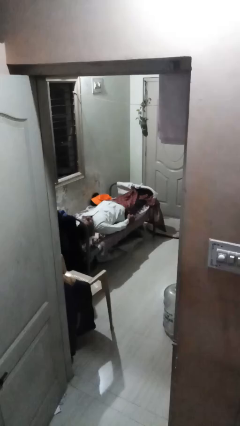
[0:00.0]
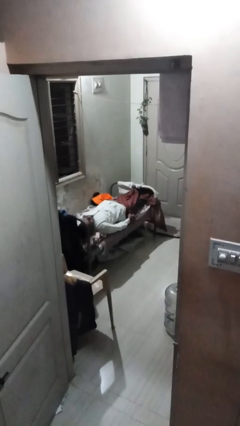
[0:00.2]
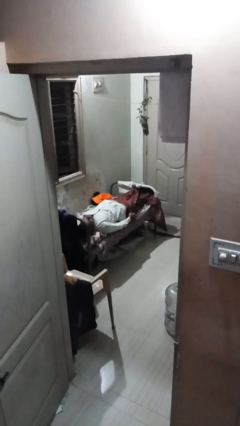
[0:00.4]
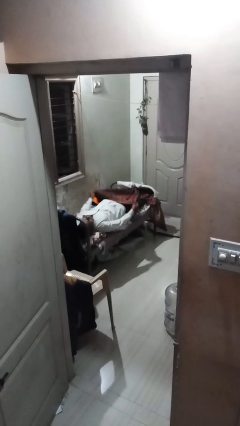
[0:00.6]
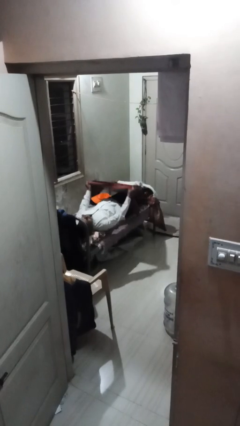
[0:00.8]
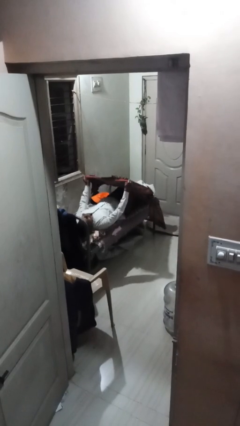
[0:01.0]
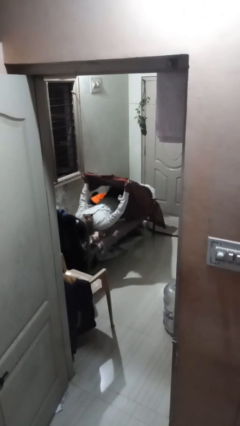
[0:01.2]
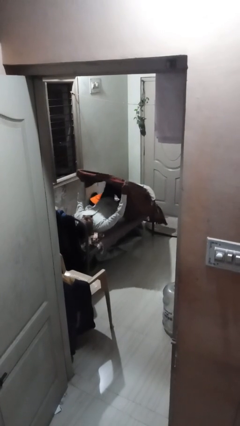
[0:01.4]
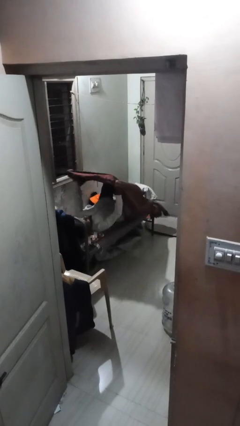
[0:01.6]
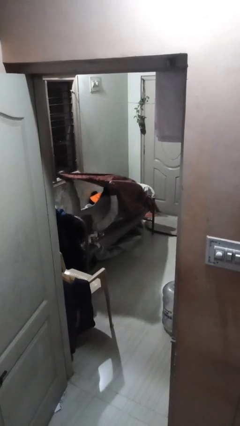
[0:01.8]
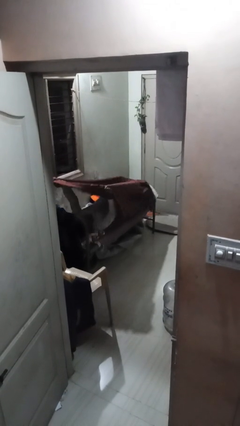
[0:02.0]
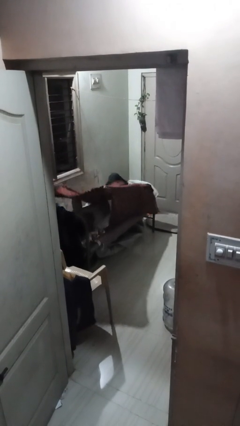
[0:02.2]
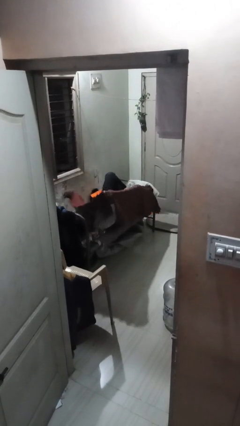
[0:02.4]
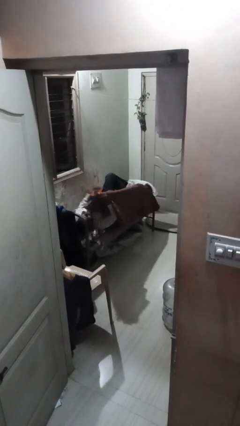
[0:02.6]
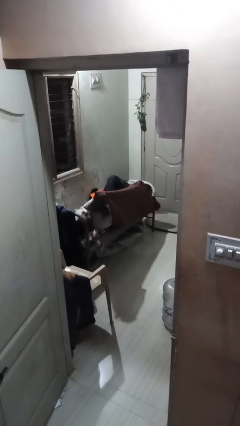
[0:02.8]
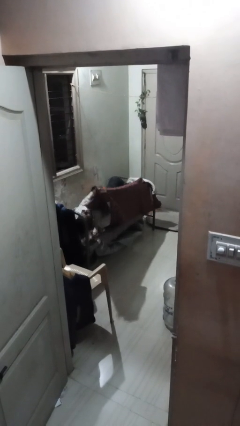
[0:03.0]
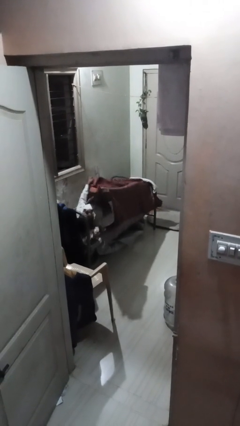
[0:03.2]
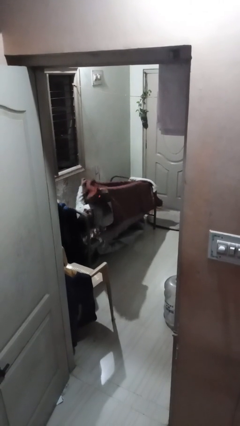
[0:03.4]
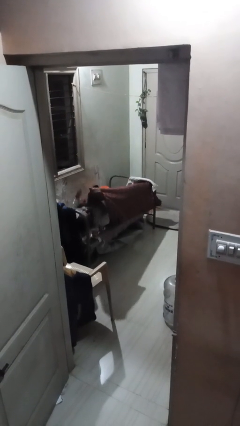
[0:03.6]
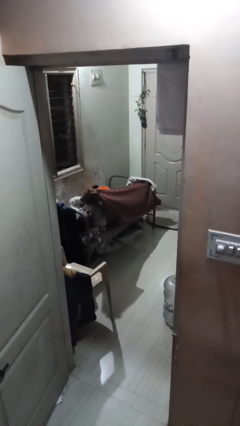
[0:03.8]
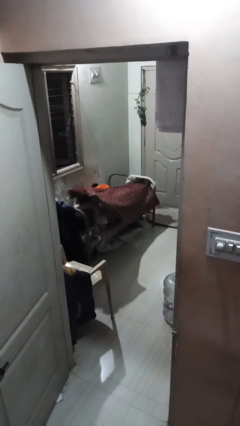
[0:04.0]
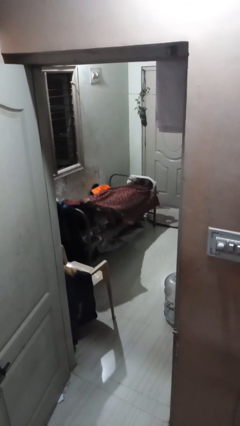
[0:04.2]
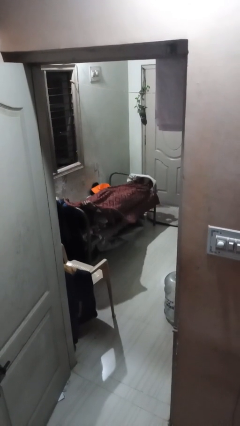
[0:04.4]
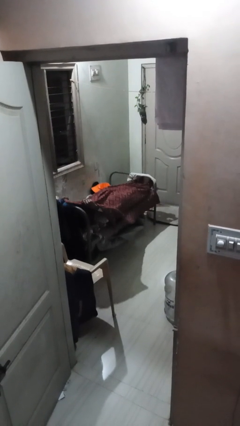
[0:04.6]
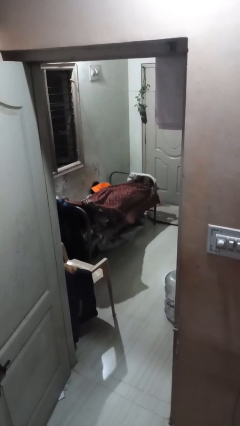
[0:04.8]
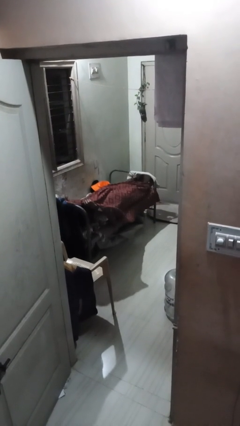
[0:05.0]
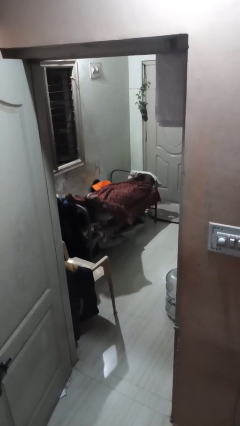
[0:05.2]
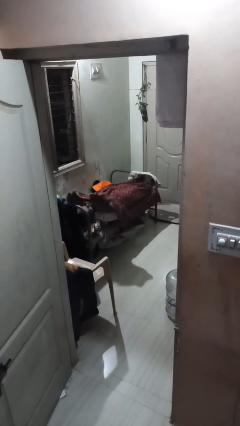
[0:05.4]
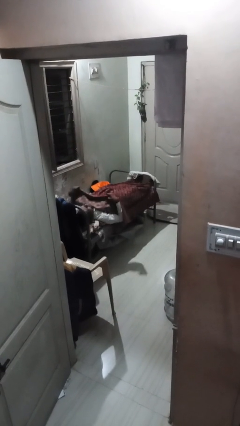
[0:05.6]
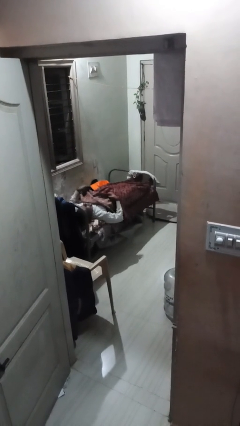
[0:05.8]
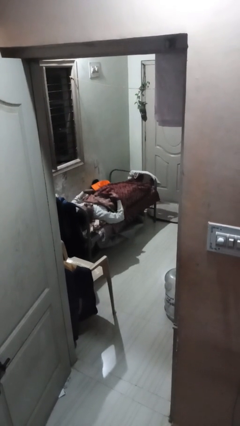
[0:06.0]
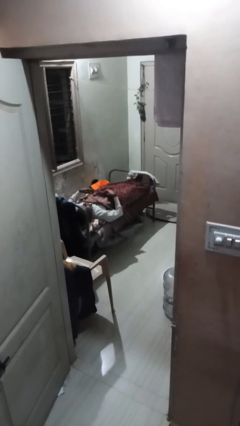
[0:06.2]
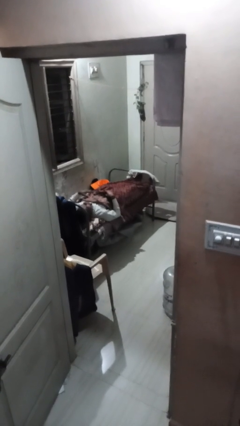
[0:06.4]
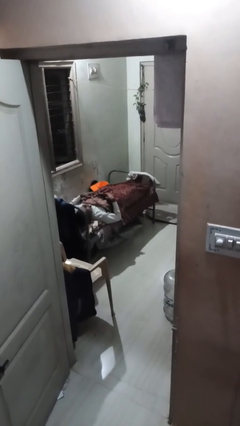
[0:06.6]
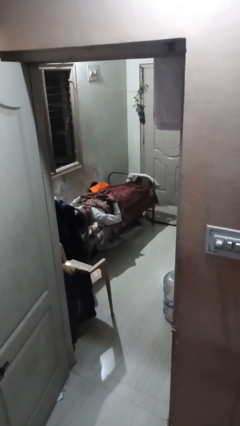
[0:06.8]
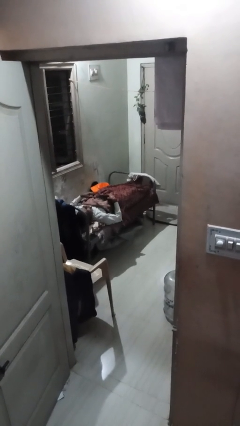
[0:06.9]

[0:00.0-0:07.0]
person covers with bedsheets

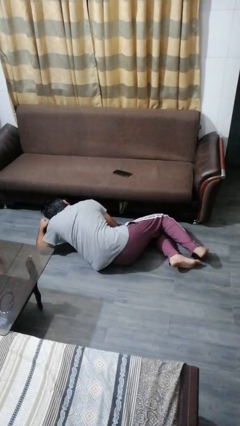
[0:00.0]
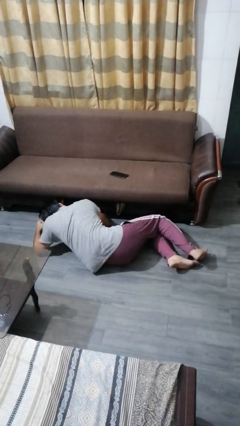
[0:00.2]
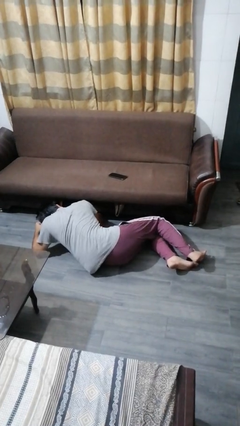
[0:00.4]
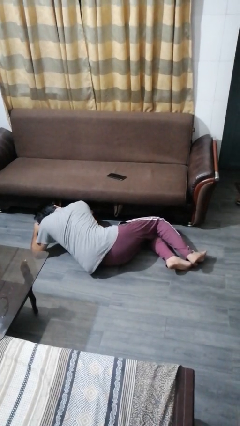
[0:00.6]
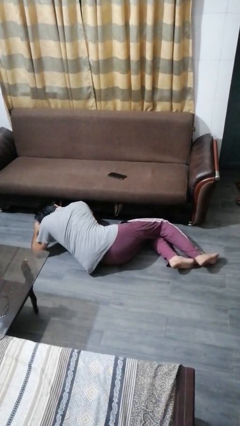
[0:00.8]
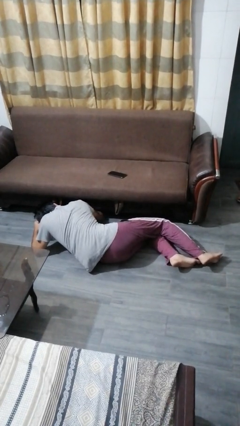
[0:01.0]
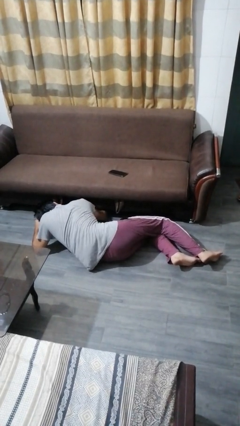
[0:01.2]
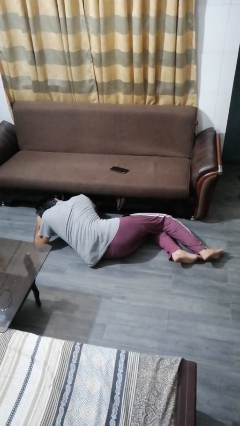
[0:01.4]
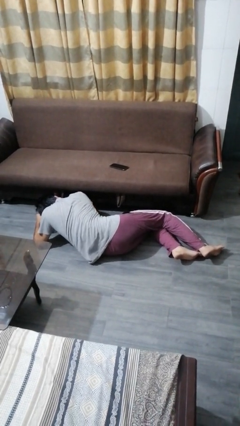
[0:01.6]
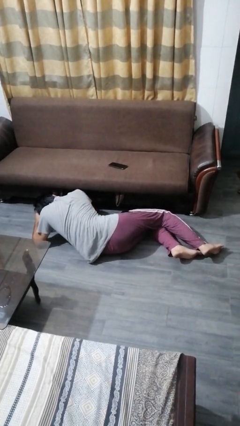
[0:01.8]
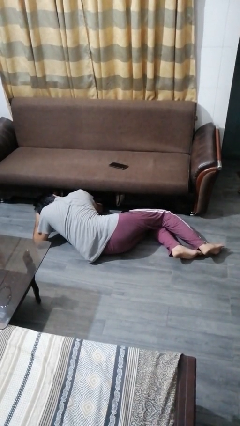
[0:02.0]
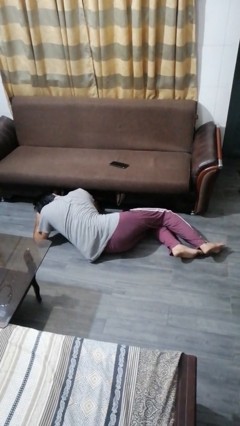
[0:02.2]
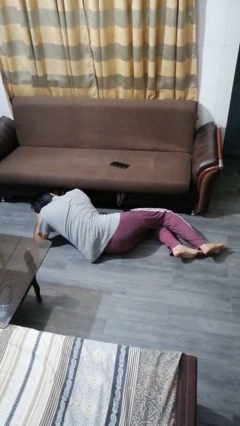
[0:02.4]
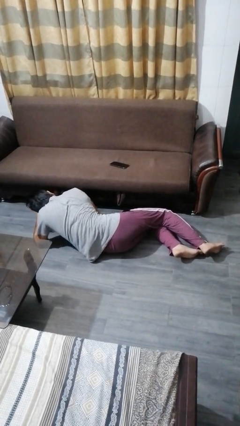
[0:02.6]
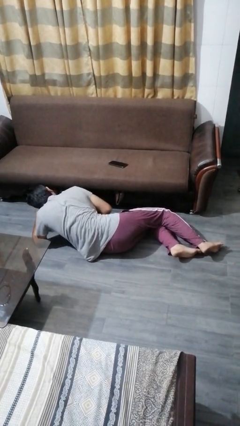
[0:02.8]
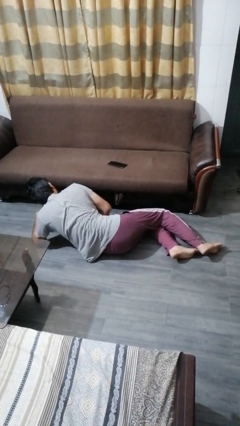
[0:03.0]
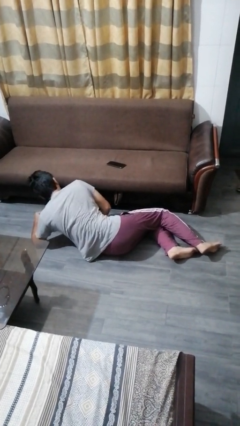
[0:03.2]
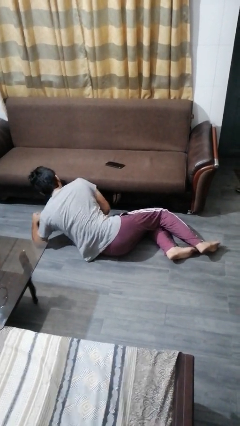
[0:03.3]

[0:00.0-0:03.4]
person searches under couch

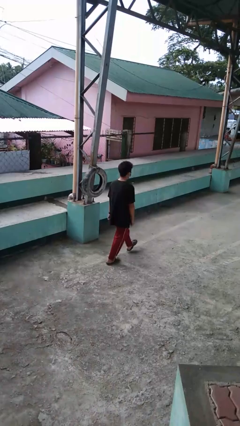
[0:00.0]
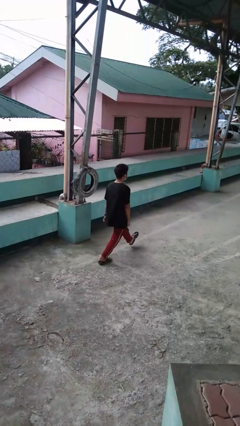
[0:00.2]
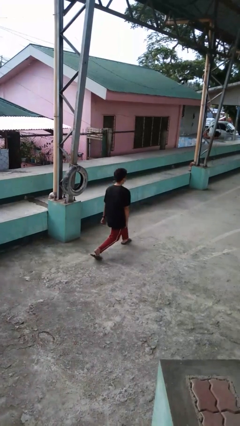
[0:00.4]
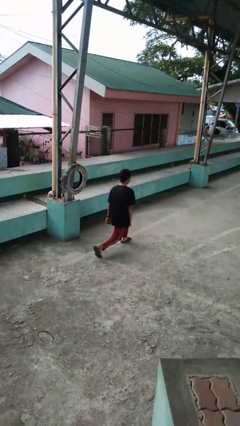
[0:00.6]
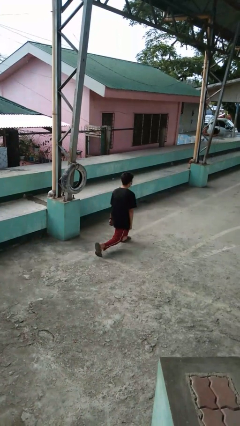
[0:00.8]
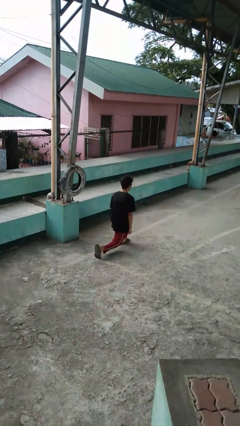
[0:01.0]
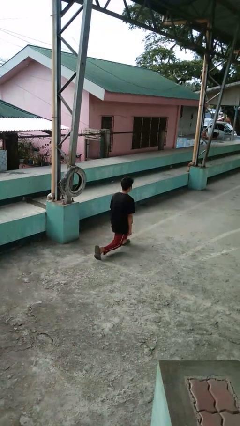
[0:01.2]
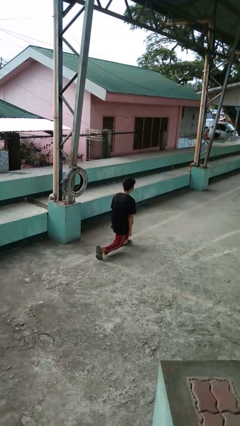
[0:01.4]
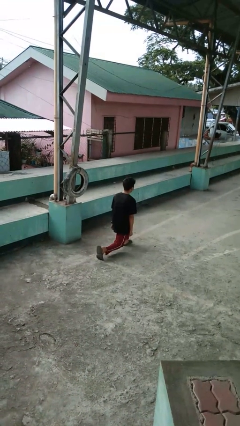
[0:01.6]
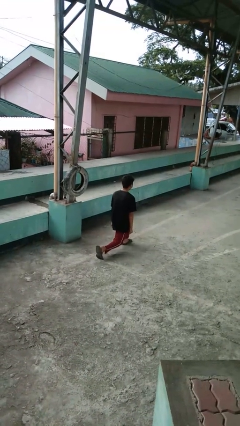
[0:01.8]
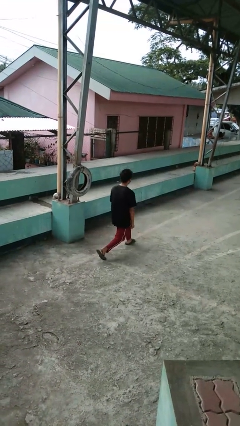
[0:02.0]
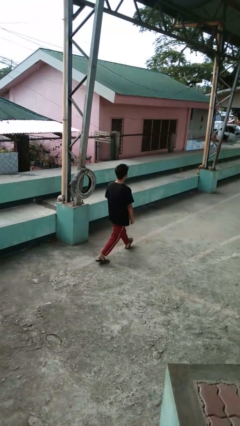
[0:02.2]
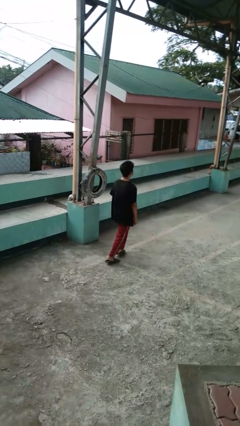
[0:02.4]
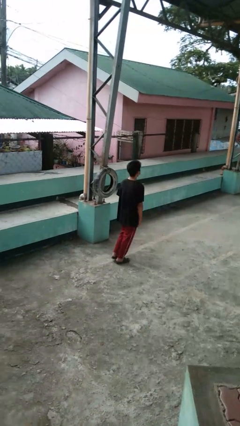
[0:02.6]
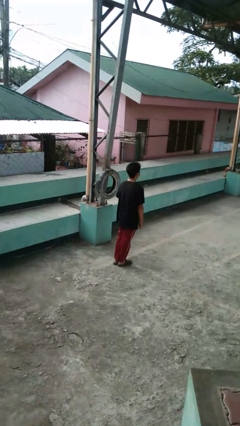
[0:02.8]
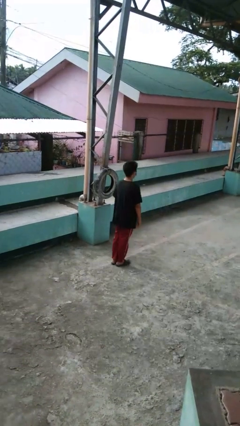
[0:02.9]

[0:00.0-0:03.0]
person exercises with lunges

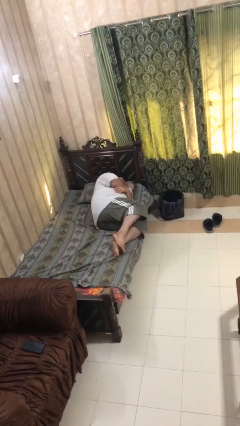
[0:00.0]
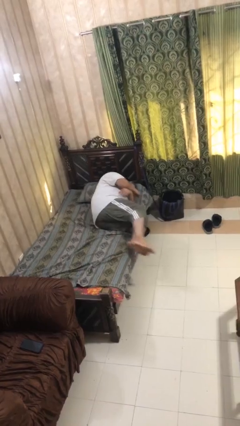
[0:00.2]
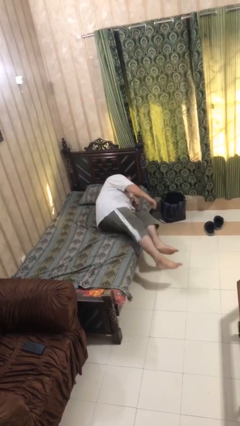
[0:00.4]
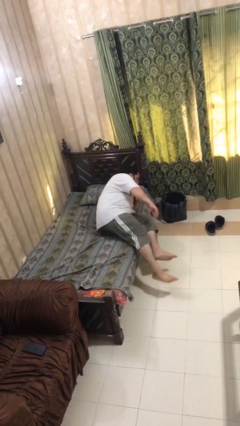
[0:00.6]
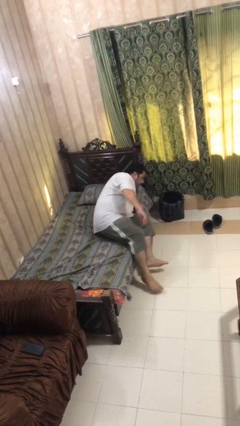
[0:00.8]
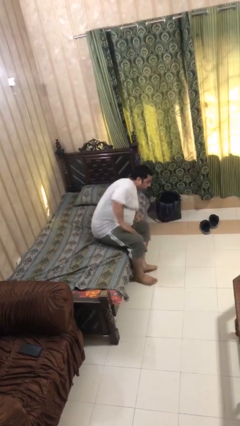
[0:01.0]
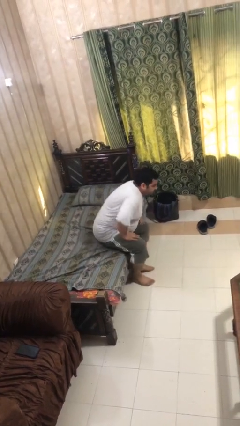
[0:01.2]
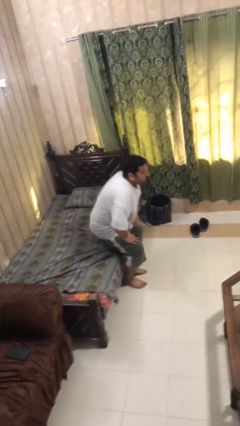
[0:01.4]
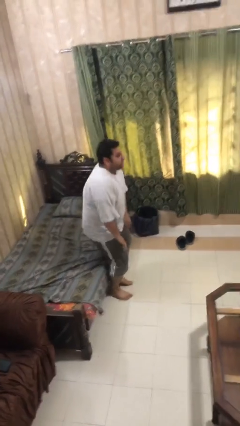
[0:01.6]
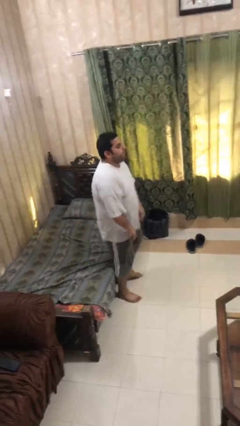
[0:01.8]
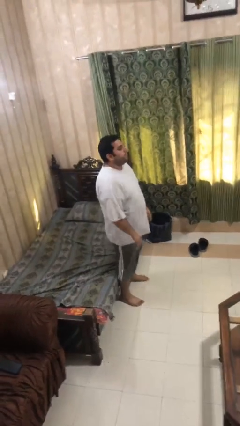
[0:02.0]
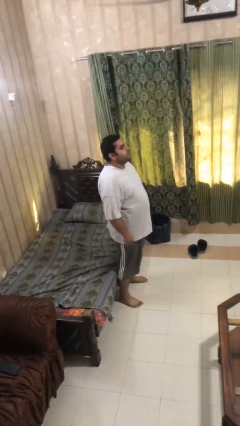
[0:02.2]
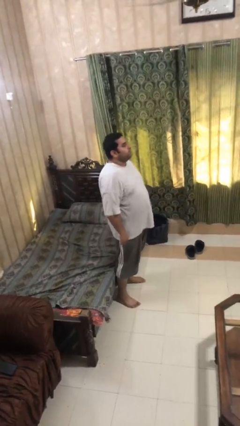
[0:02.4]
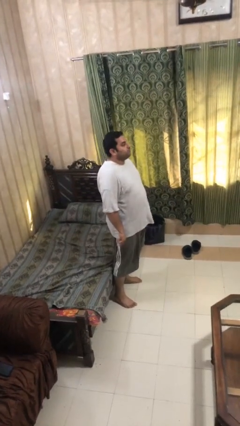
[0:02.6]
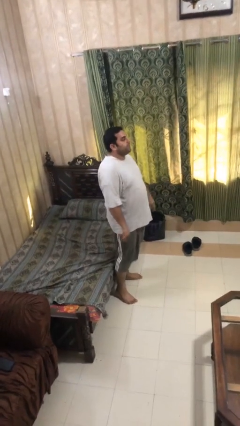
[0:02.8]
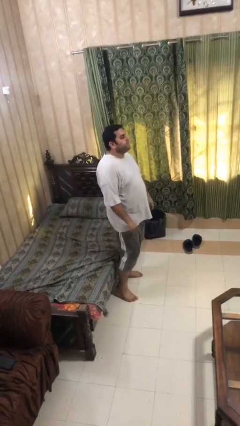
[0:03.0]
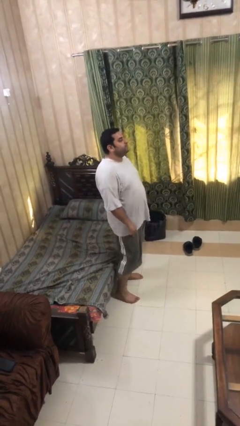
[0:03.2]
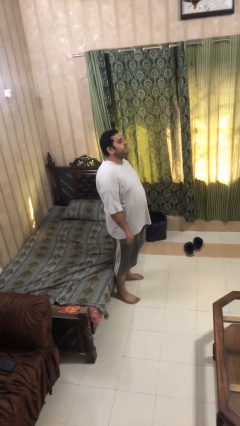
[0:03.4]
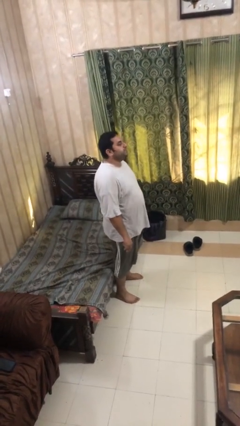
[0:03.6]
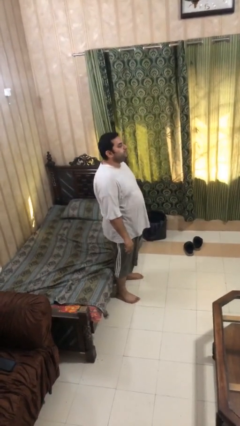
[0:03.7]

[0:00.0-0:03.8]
person stands up

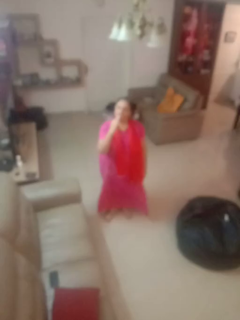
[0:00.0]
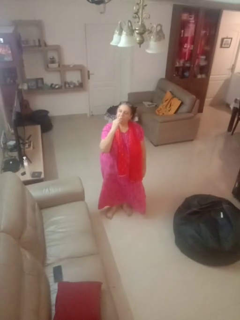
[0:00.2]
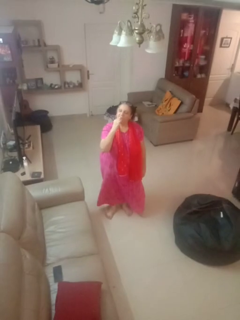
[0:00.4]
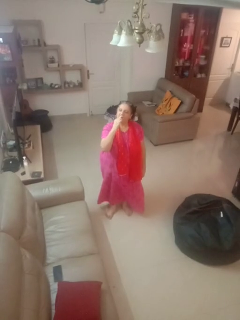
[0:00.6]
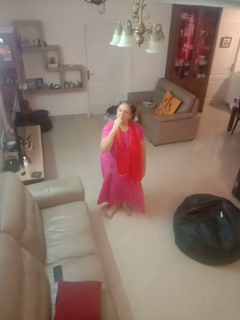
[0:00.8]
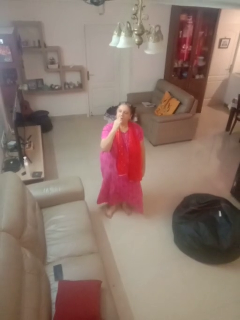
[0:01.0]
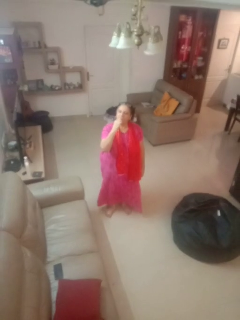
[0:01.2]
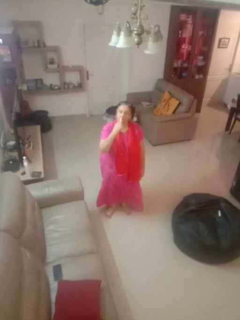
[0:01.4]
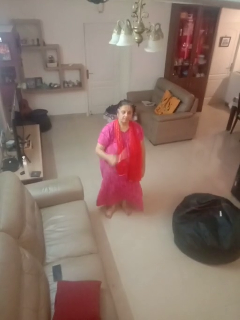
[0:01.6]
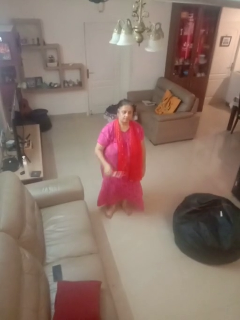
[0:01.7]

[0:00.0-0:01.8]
person brushes teeth
